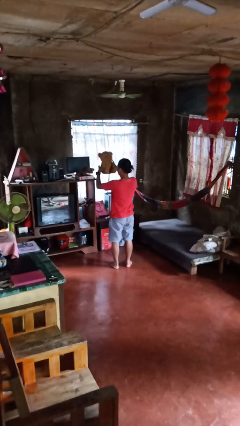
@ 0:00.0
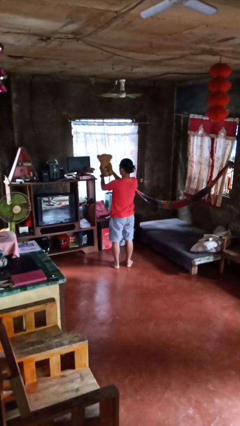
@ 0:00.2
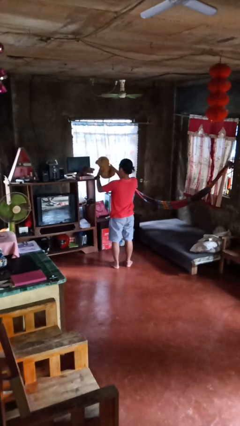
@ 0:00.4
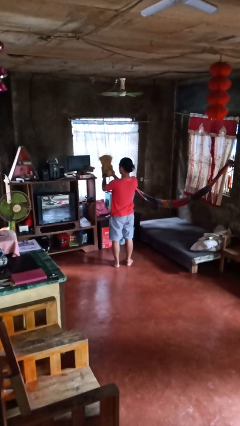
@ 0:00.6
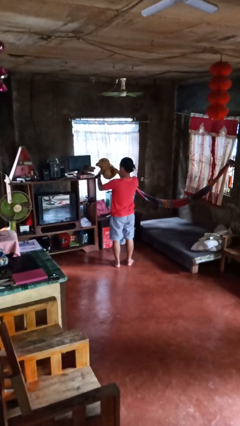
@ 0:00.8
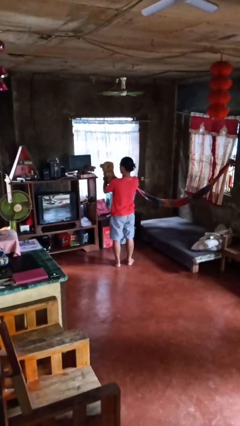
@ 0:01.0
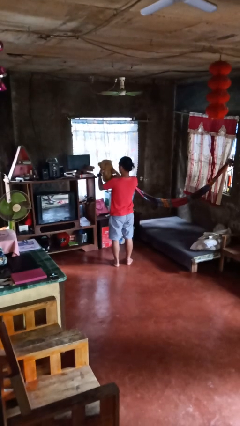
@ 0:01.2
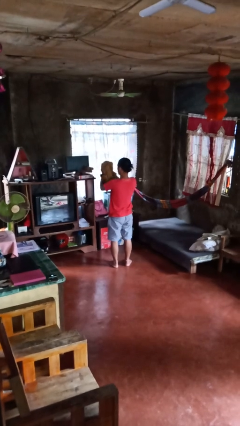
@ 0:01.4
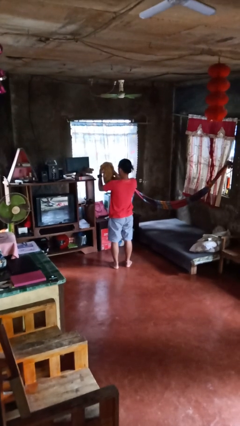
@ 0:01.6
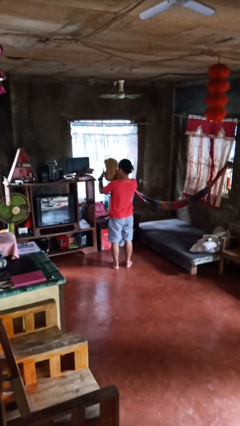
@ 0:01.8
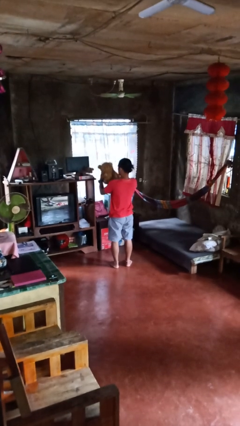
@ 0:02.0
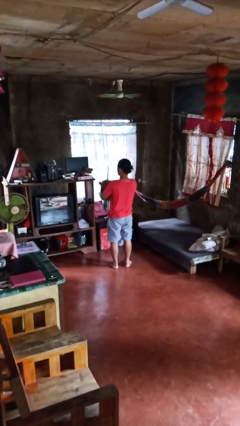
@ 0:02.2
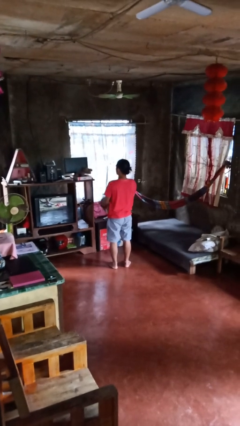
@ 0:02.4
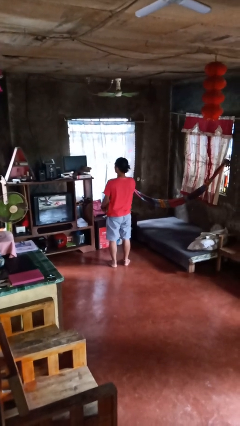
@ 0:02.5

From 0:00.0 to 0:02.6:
person squeezes object

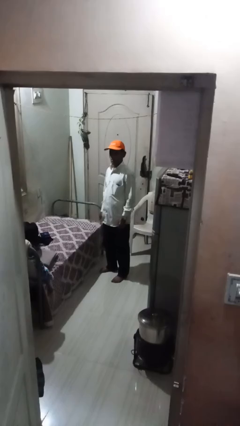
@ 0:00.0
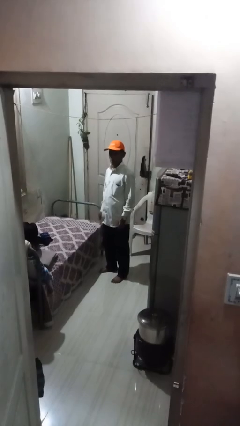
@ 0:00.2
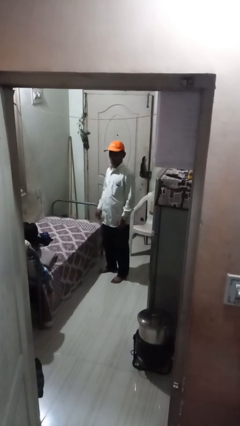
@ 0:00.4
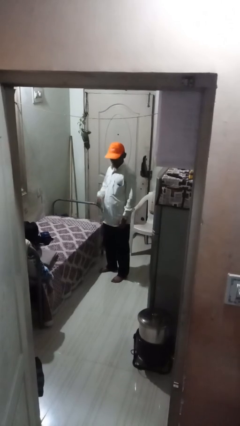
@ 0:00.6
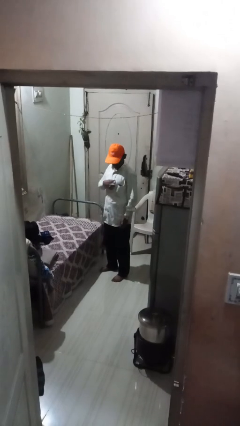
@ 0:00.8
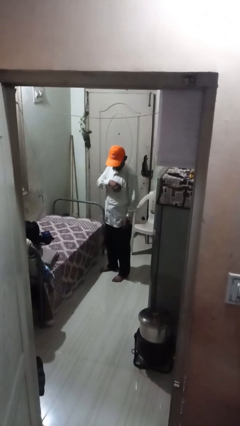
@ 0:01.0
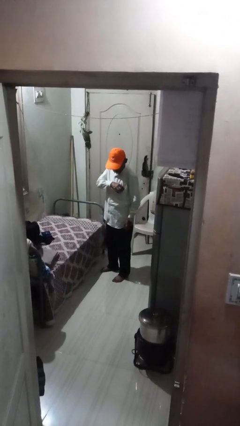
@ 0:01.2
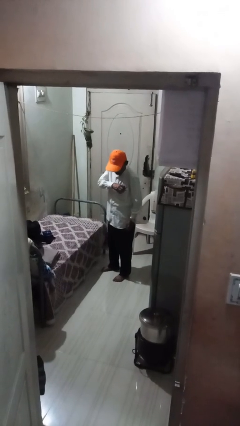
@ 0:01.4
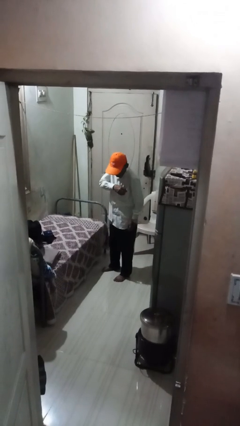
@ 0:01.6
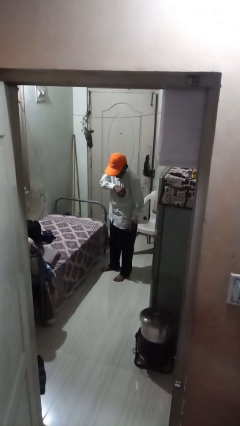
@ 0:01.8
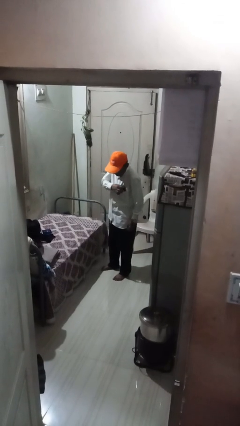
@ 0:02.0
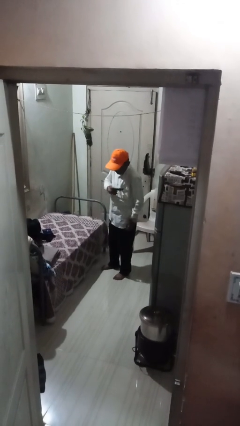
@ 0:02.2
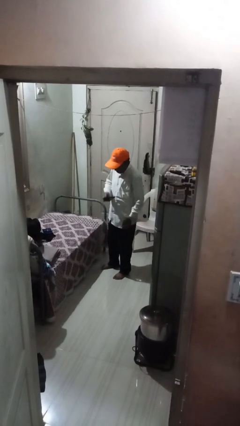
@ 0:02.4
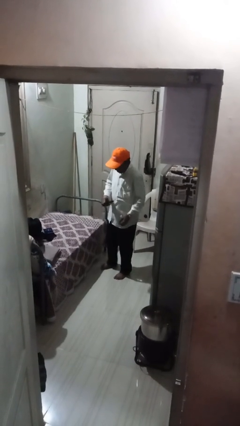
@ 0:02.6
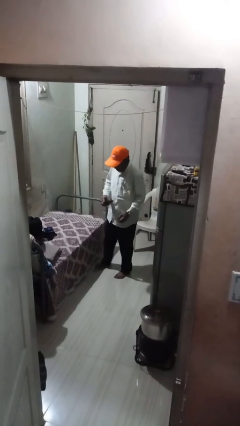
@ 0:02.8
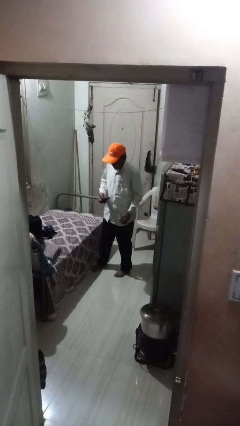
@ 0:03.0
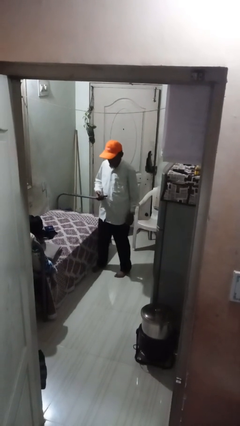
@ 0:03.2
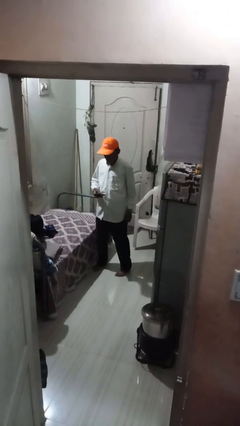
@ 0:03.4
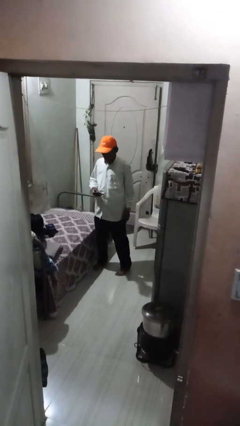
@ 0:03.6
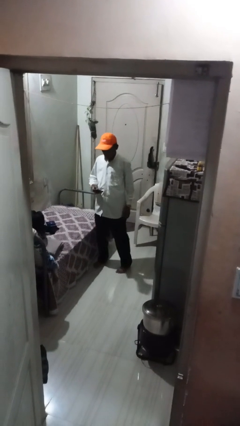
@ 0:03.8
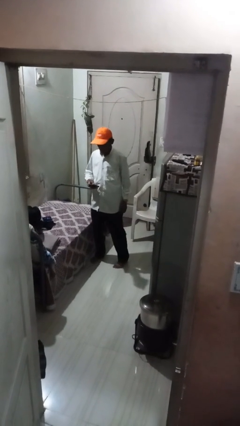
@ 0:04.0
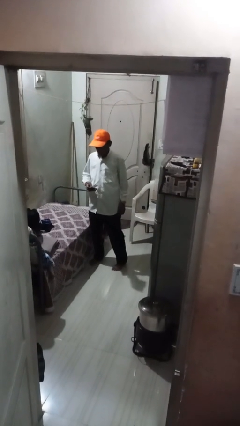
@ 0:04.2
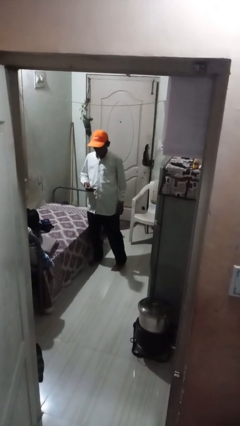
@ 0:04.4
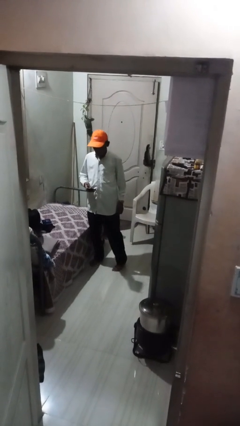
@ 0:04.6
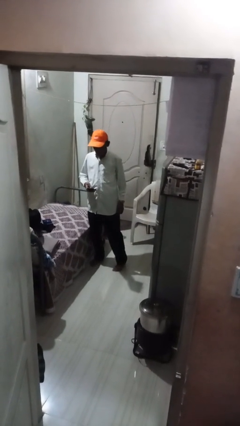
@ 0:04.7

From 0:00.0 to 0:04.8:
person takes phone from pocket

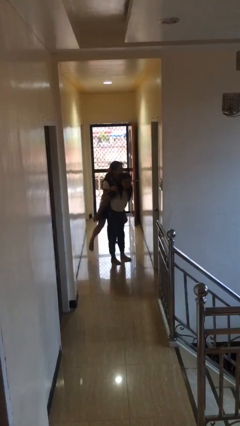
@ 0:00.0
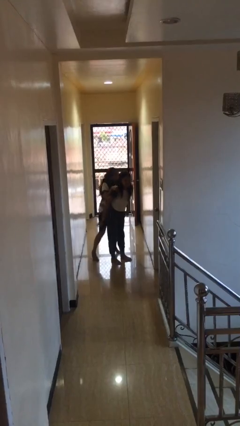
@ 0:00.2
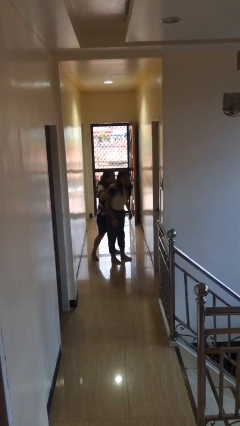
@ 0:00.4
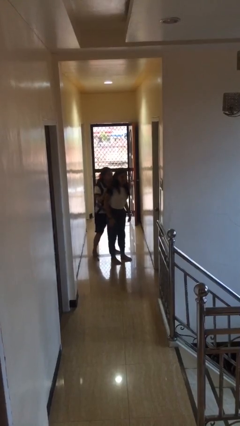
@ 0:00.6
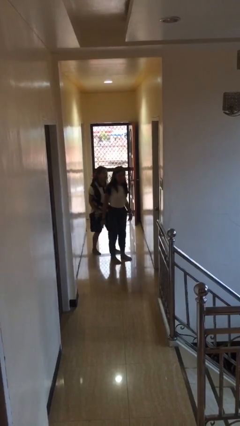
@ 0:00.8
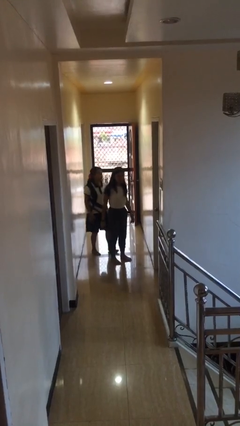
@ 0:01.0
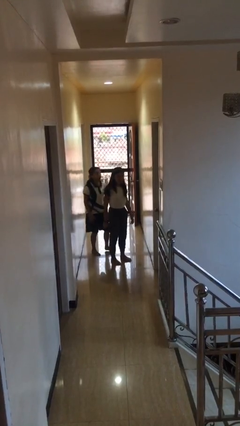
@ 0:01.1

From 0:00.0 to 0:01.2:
person puts down person

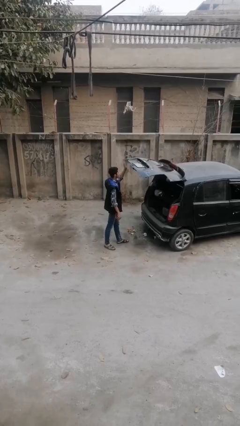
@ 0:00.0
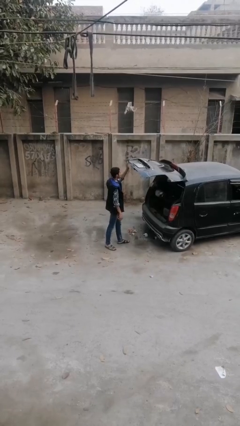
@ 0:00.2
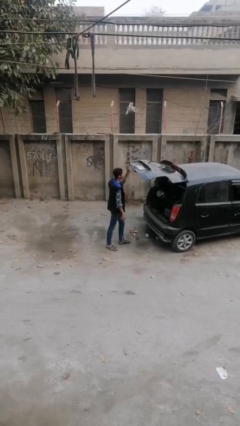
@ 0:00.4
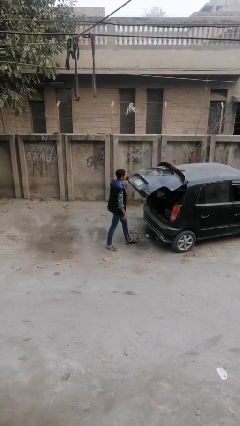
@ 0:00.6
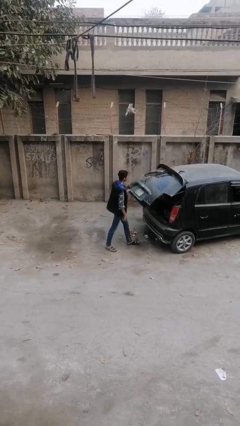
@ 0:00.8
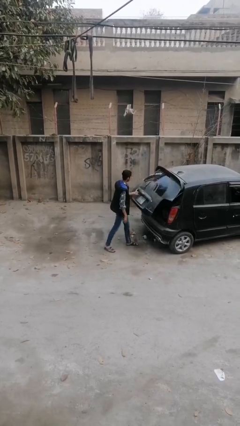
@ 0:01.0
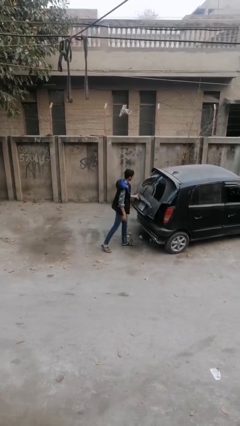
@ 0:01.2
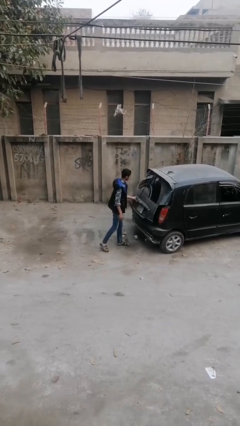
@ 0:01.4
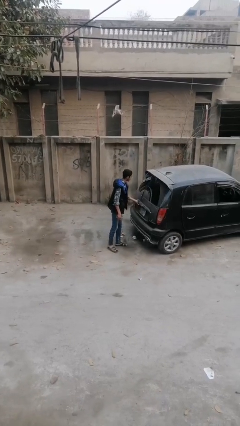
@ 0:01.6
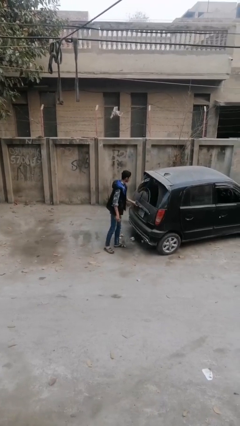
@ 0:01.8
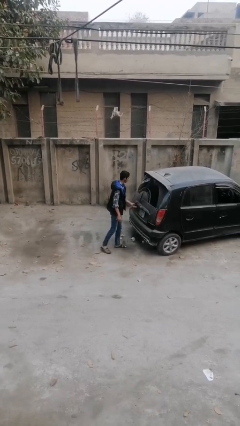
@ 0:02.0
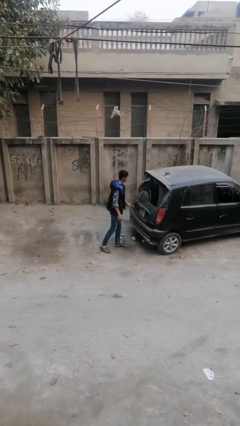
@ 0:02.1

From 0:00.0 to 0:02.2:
person closes car trunk

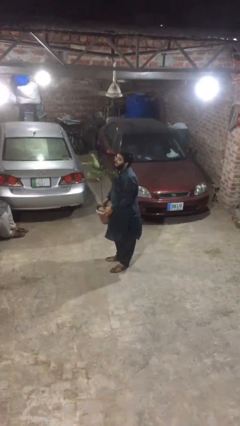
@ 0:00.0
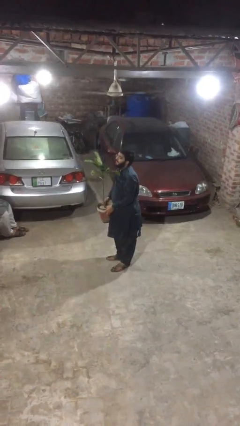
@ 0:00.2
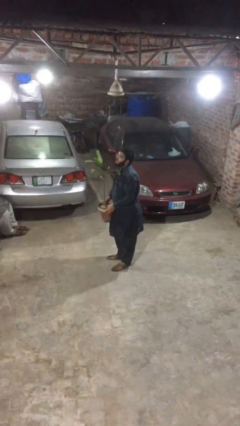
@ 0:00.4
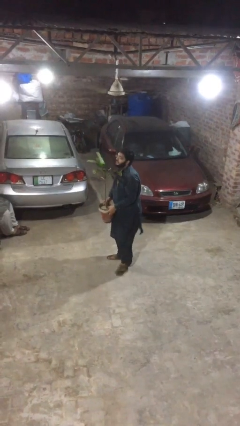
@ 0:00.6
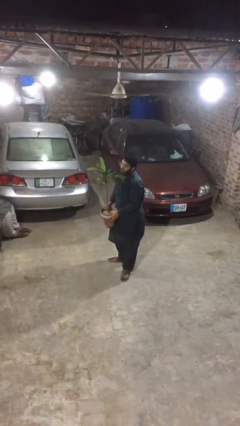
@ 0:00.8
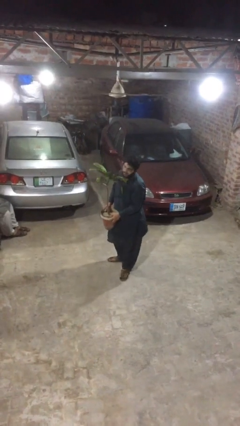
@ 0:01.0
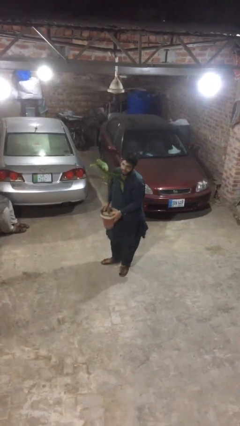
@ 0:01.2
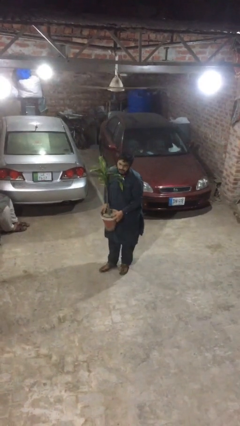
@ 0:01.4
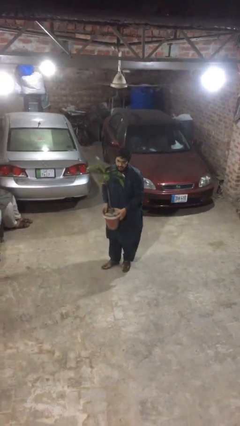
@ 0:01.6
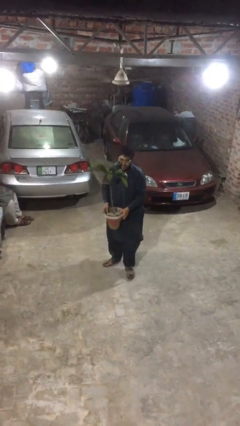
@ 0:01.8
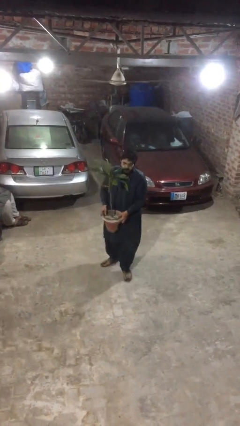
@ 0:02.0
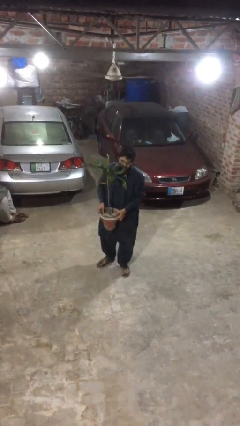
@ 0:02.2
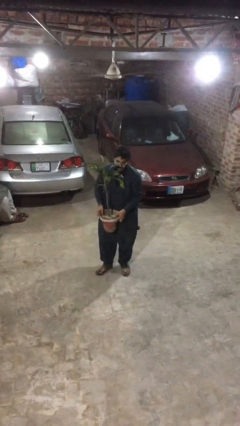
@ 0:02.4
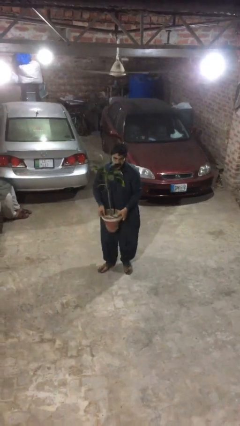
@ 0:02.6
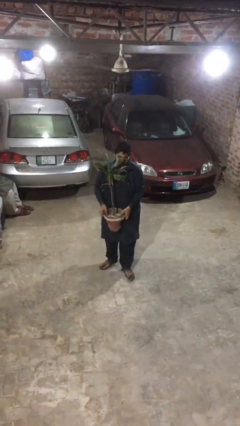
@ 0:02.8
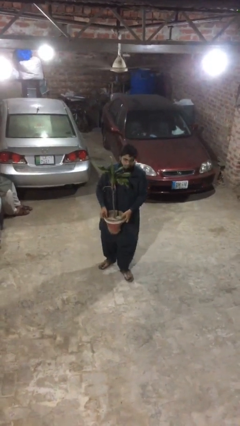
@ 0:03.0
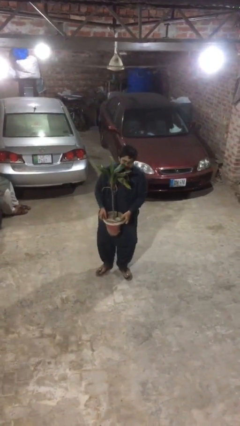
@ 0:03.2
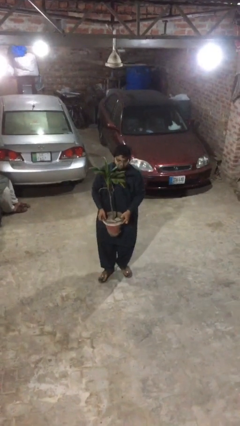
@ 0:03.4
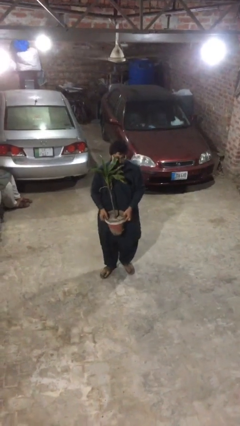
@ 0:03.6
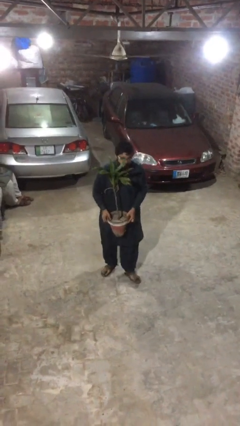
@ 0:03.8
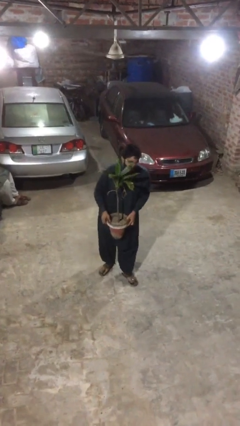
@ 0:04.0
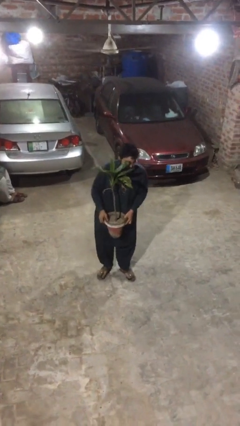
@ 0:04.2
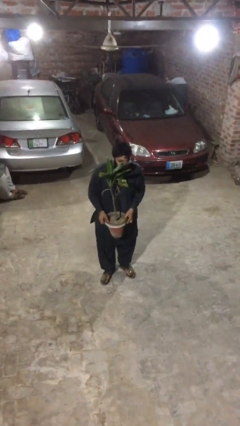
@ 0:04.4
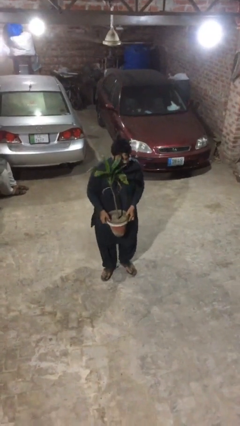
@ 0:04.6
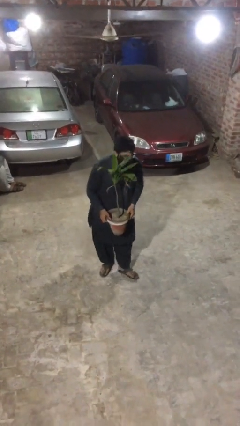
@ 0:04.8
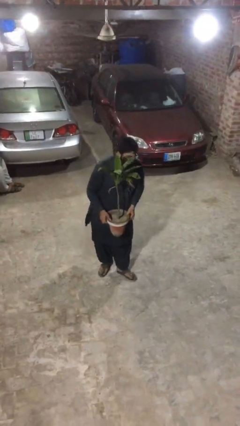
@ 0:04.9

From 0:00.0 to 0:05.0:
person carries heavy object

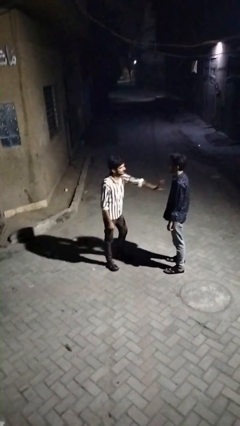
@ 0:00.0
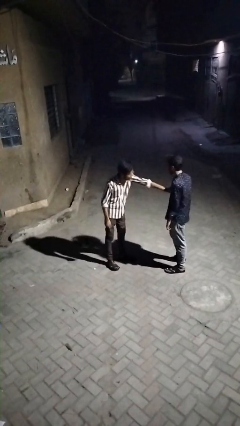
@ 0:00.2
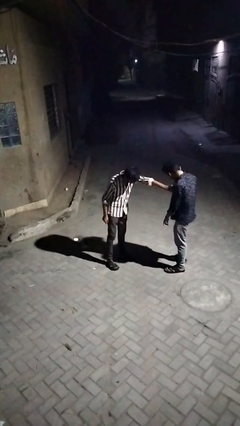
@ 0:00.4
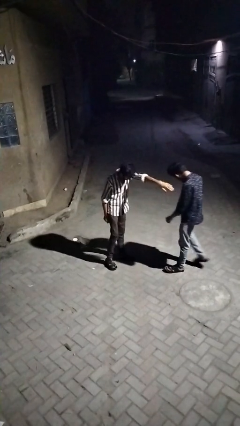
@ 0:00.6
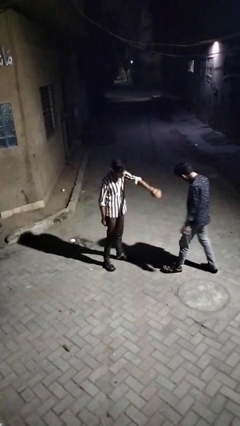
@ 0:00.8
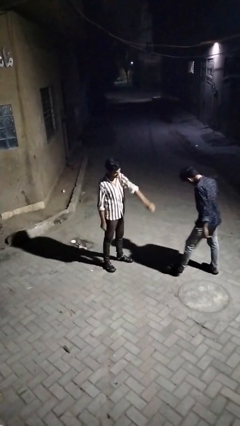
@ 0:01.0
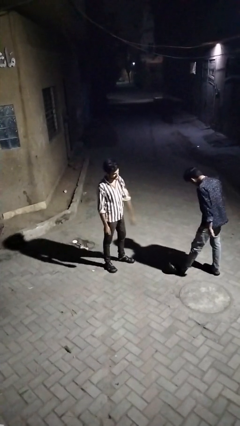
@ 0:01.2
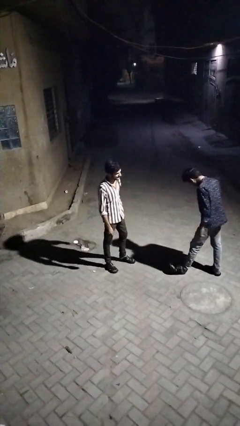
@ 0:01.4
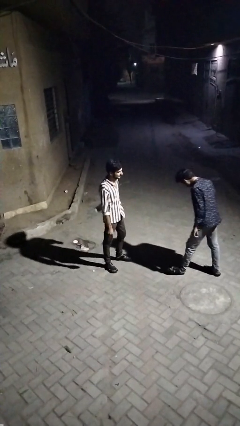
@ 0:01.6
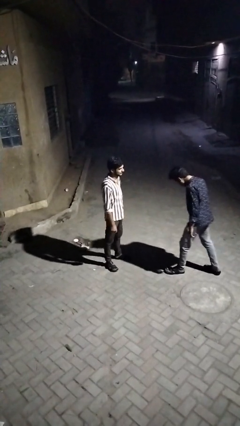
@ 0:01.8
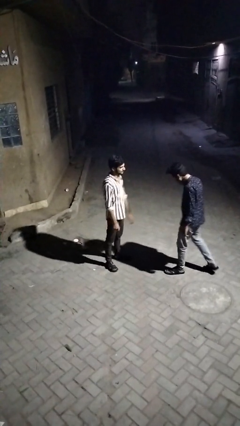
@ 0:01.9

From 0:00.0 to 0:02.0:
person shoves person
